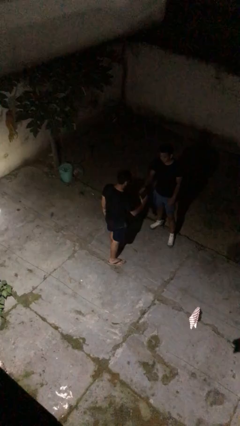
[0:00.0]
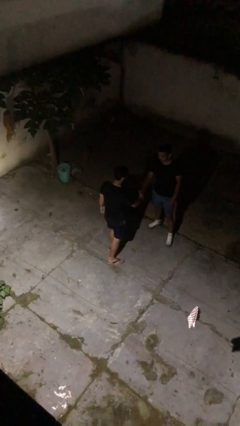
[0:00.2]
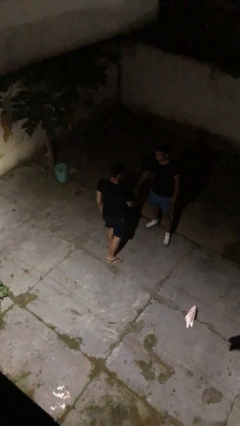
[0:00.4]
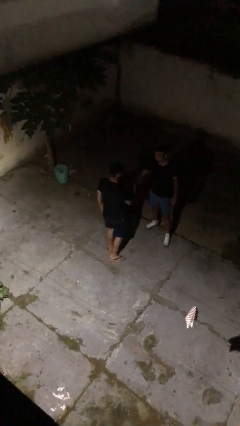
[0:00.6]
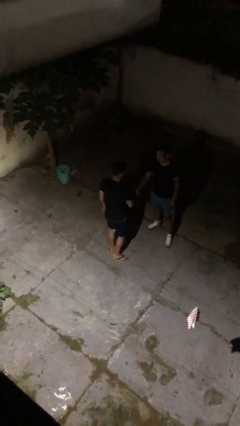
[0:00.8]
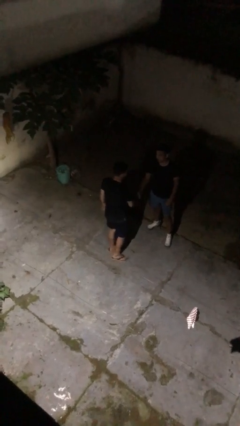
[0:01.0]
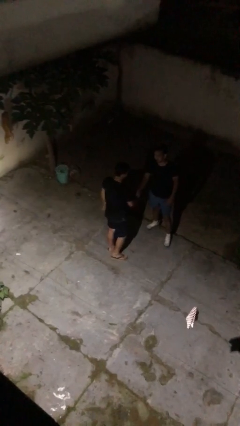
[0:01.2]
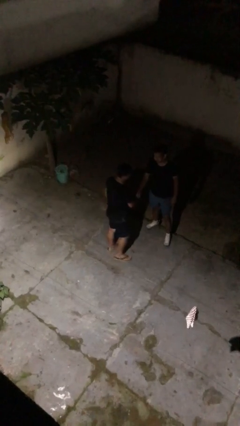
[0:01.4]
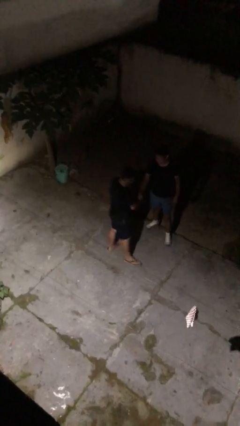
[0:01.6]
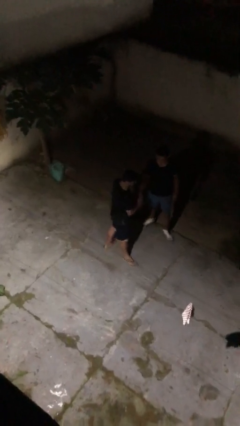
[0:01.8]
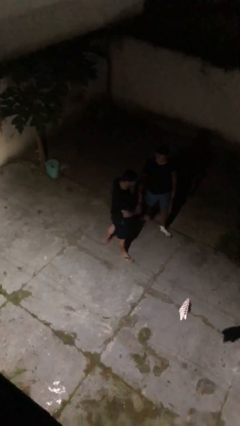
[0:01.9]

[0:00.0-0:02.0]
person shakes hand

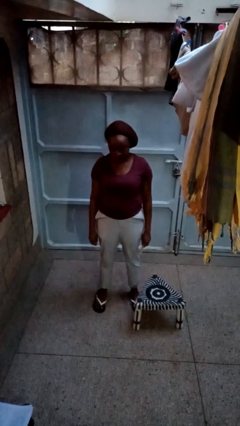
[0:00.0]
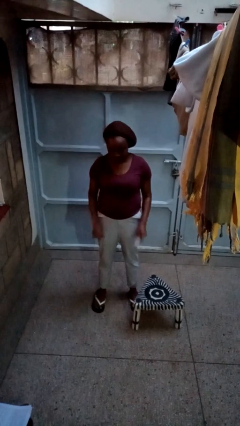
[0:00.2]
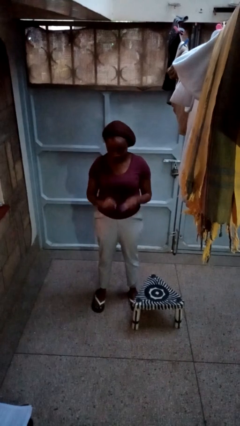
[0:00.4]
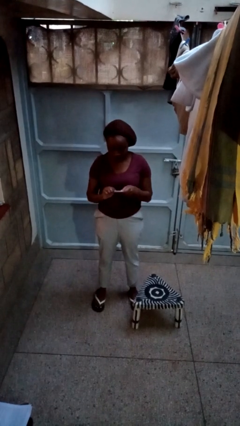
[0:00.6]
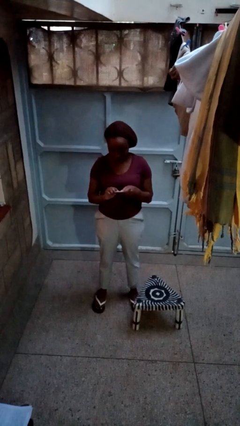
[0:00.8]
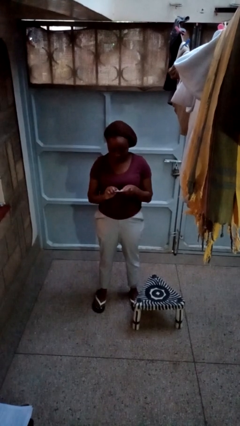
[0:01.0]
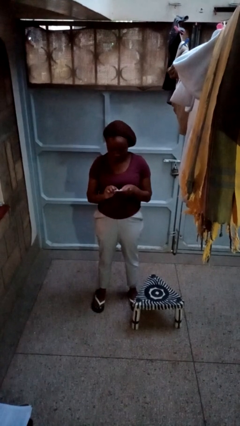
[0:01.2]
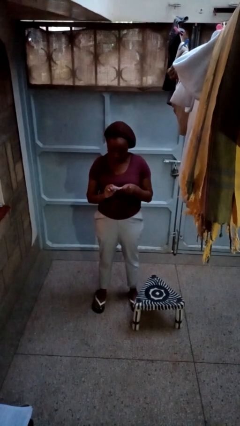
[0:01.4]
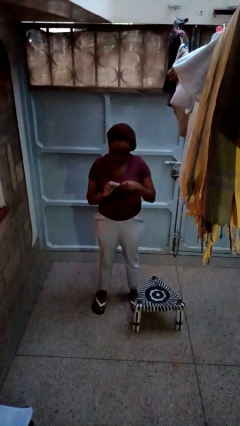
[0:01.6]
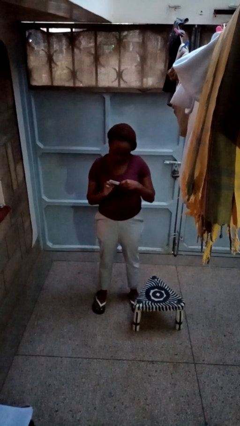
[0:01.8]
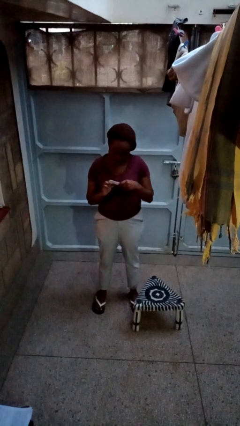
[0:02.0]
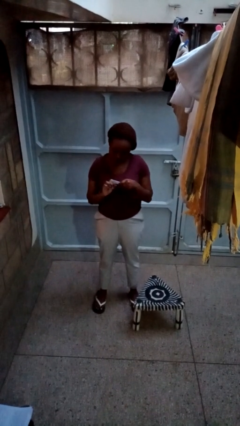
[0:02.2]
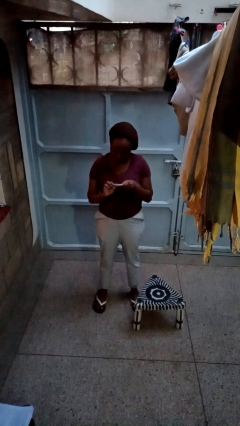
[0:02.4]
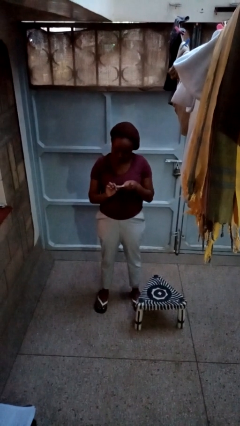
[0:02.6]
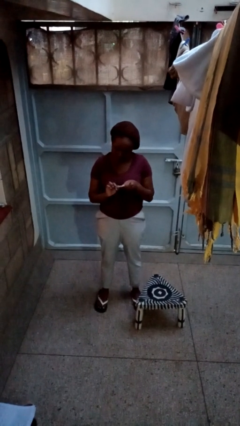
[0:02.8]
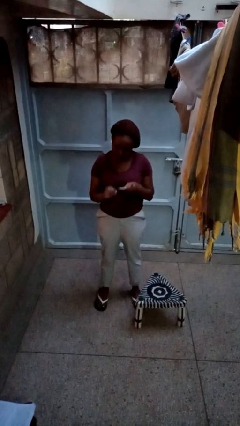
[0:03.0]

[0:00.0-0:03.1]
person files fingernails

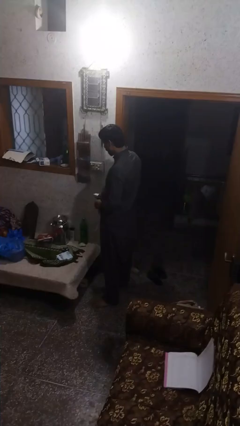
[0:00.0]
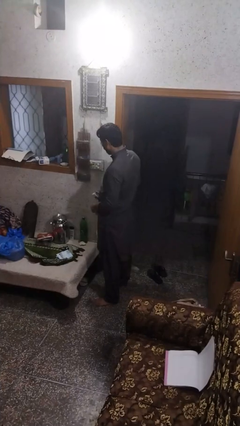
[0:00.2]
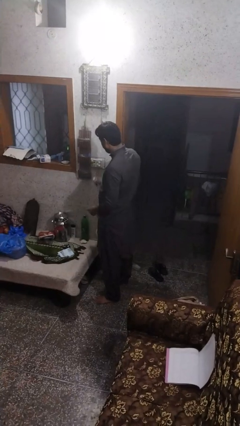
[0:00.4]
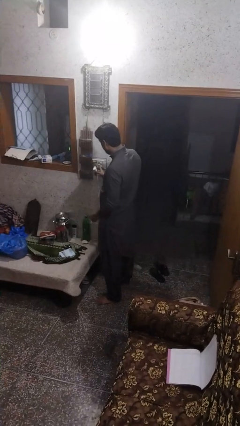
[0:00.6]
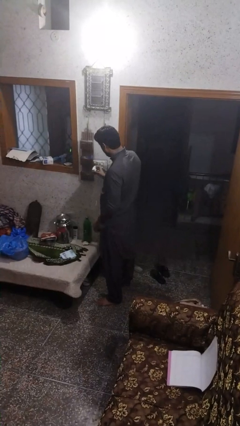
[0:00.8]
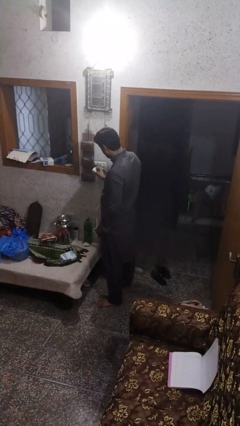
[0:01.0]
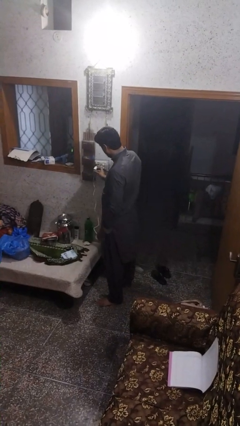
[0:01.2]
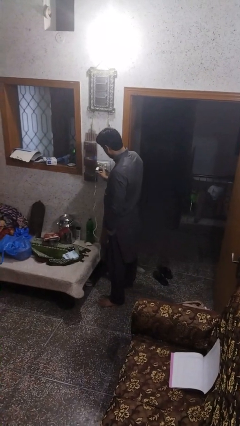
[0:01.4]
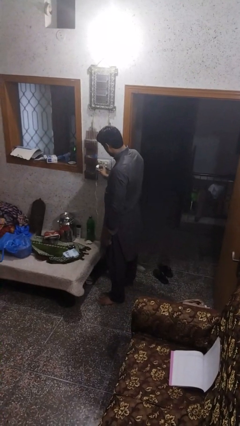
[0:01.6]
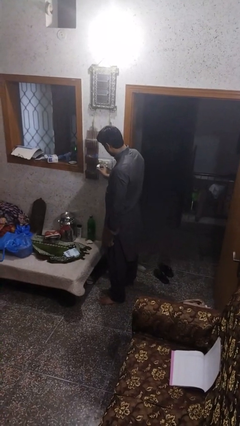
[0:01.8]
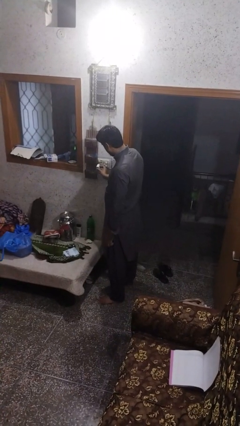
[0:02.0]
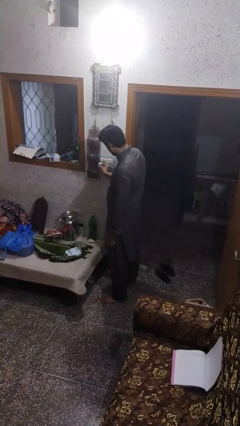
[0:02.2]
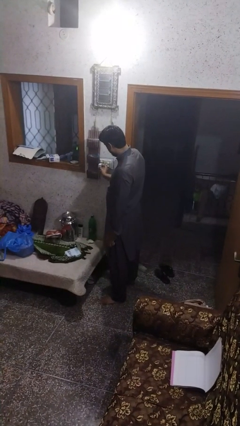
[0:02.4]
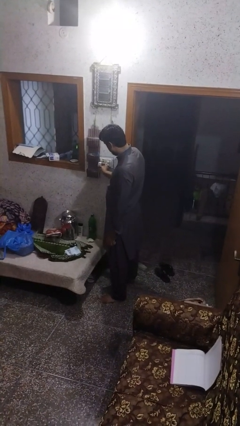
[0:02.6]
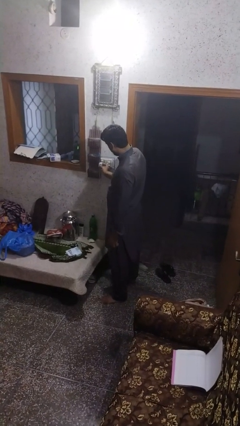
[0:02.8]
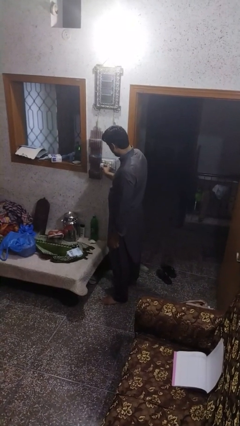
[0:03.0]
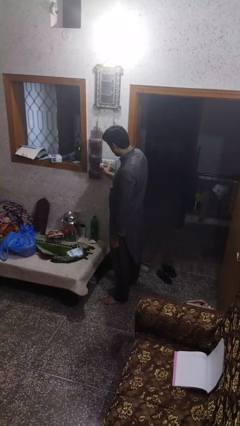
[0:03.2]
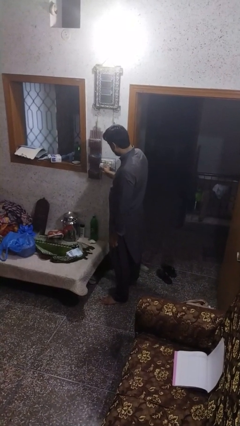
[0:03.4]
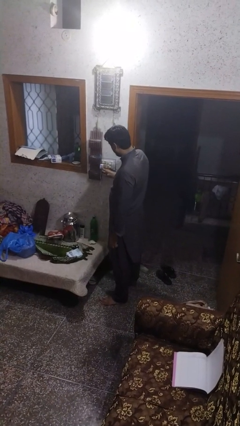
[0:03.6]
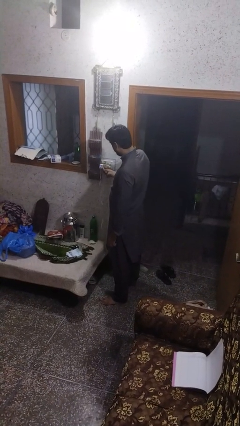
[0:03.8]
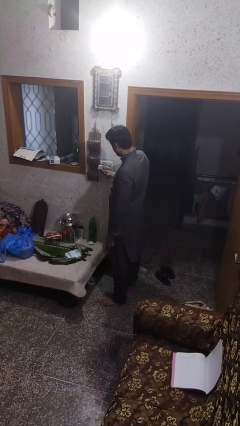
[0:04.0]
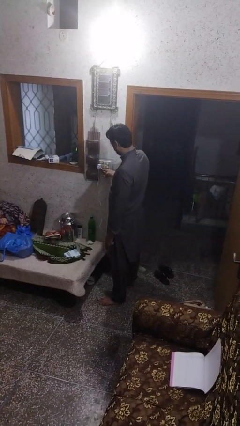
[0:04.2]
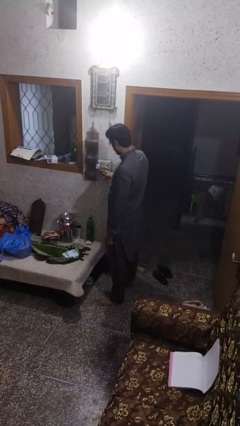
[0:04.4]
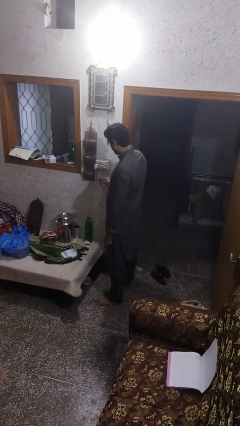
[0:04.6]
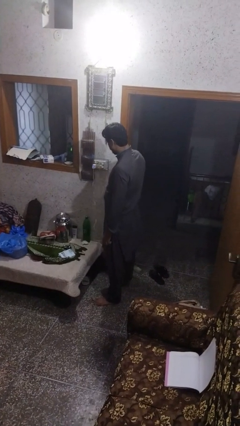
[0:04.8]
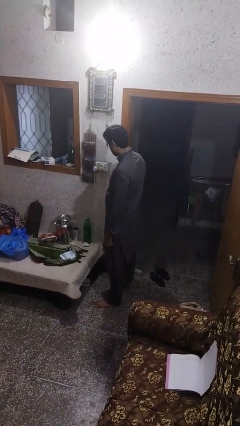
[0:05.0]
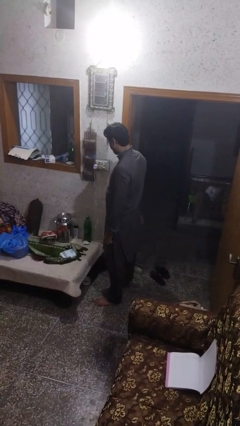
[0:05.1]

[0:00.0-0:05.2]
person plugs into electrical socket

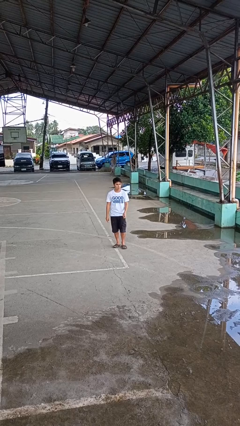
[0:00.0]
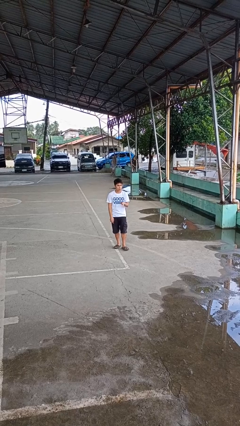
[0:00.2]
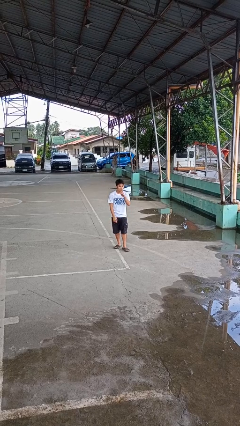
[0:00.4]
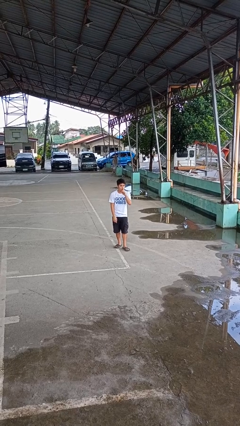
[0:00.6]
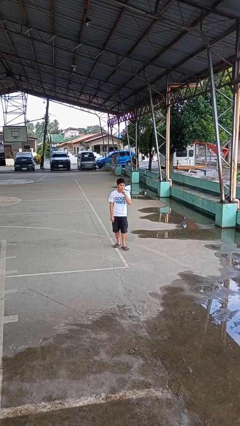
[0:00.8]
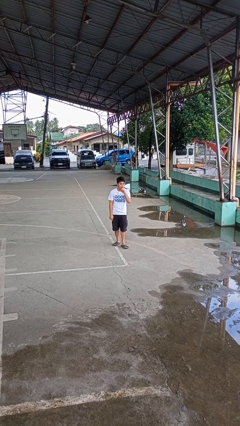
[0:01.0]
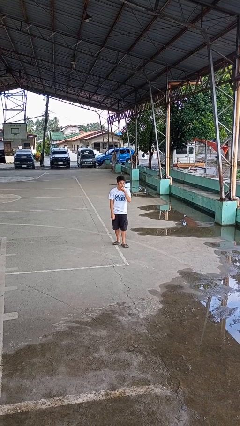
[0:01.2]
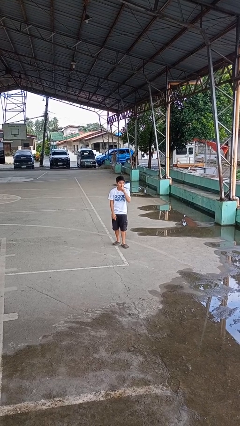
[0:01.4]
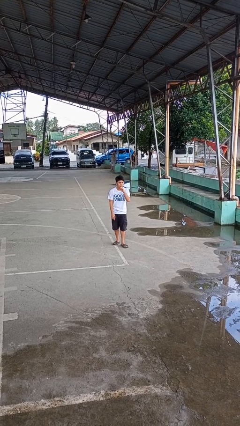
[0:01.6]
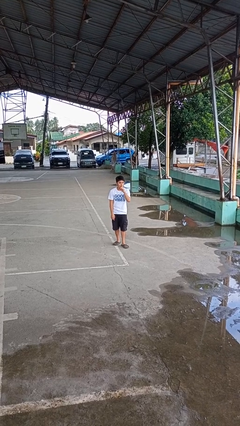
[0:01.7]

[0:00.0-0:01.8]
person gestures be quiet

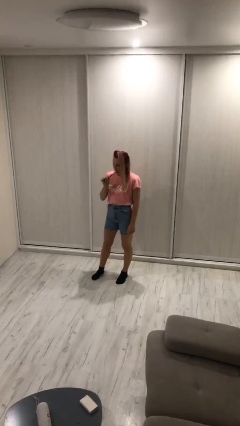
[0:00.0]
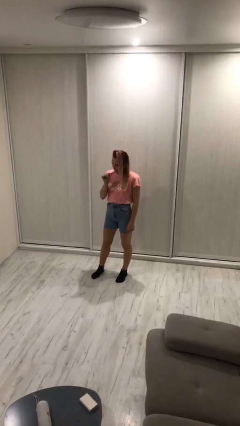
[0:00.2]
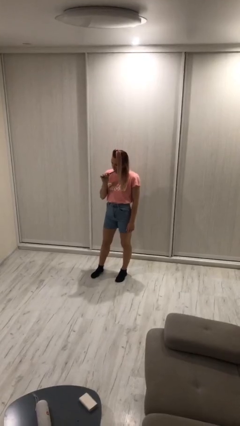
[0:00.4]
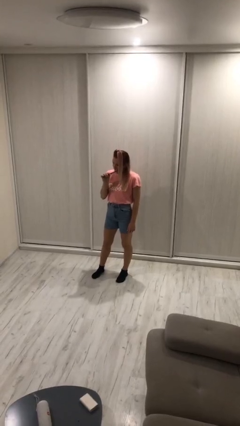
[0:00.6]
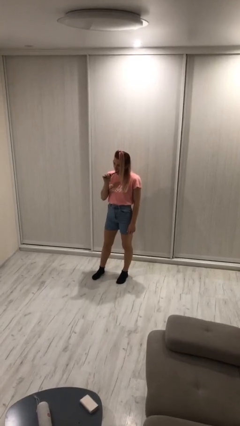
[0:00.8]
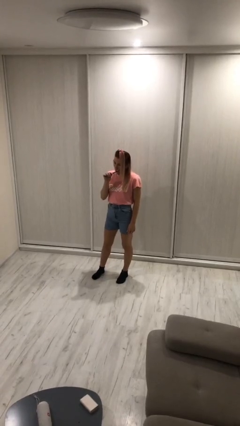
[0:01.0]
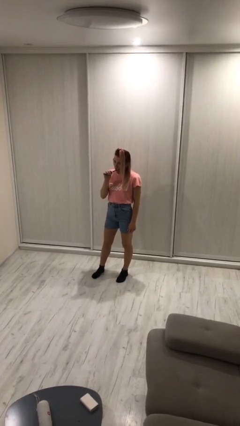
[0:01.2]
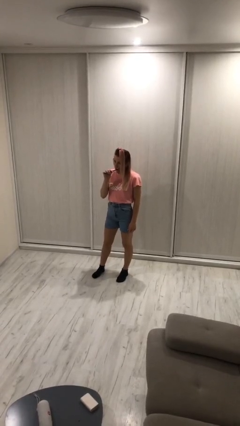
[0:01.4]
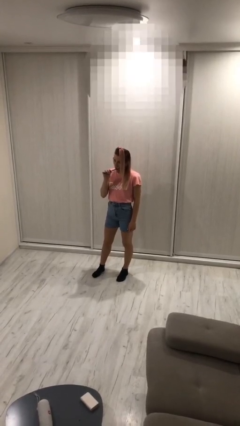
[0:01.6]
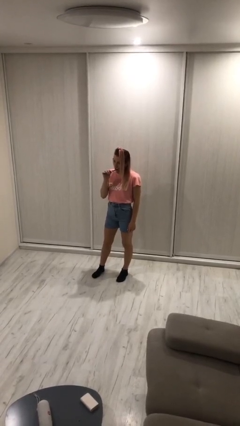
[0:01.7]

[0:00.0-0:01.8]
person brushes teeth

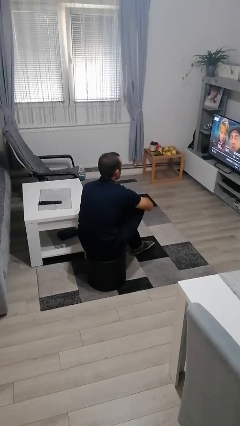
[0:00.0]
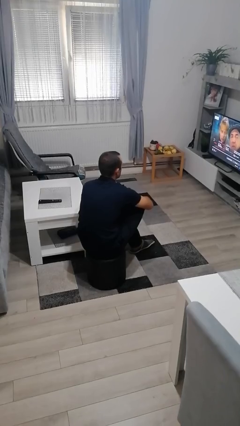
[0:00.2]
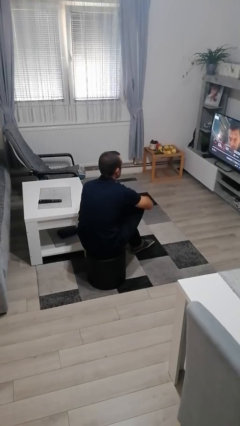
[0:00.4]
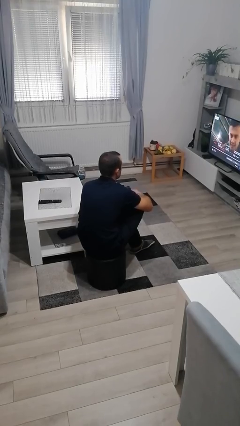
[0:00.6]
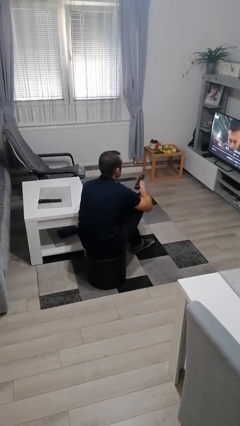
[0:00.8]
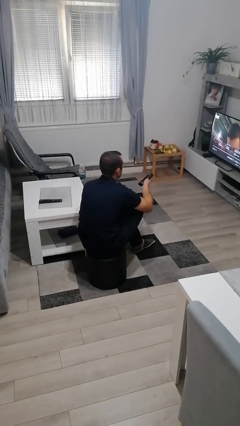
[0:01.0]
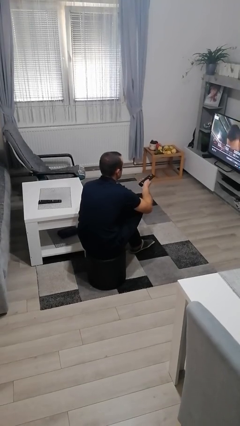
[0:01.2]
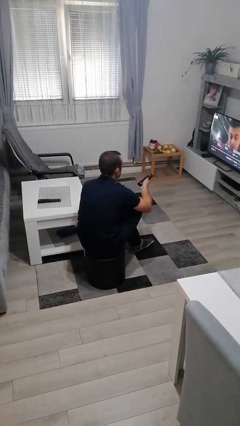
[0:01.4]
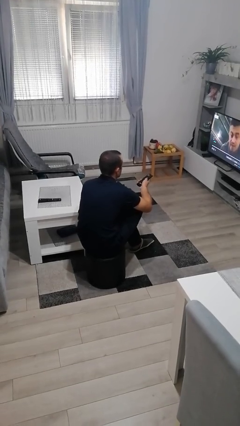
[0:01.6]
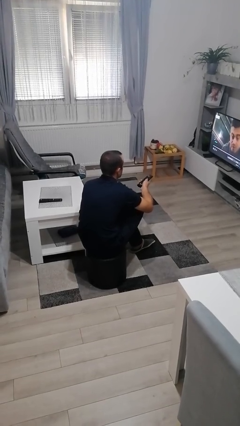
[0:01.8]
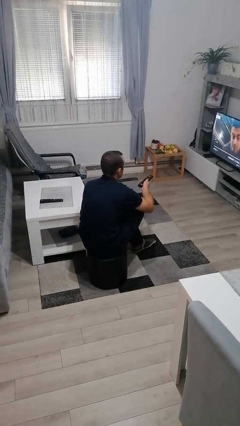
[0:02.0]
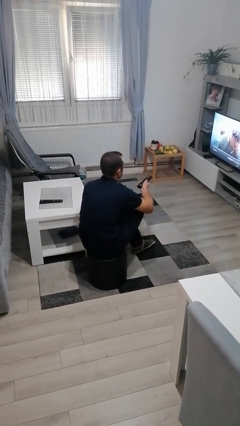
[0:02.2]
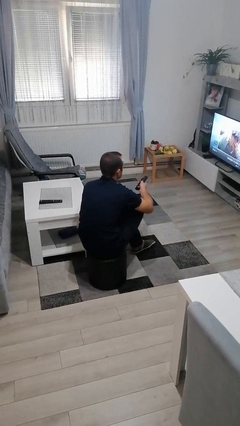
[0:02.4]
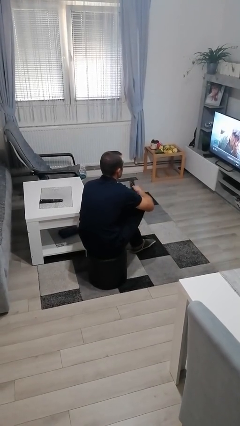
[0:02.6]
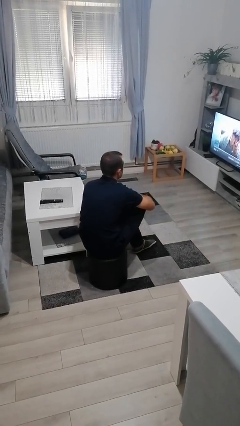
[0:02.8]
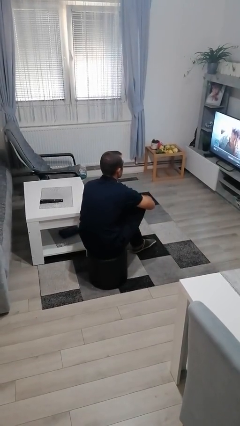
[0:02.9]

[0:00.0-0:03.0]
person uses television remote

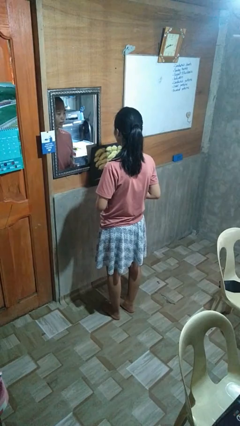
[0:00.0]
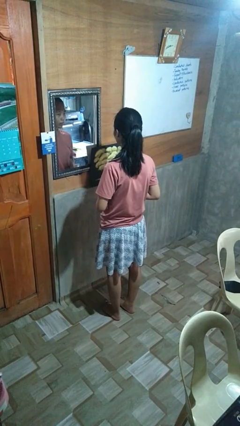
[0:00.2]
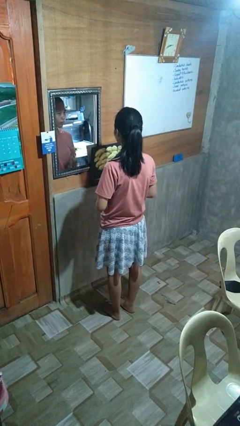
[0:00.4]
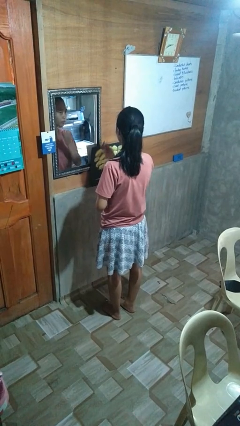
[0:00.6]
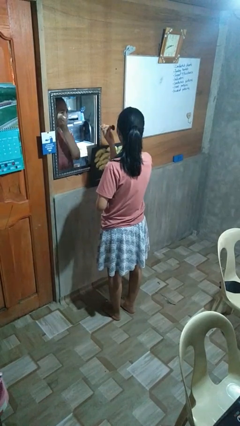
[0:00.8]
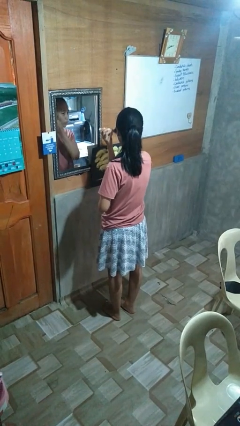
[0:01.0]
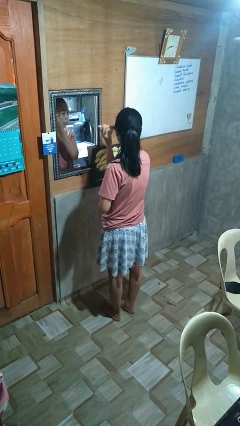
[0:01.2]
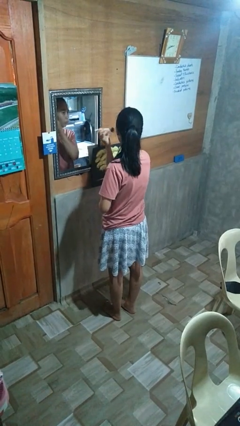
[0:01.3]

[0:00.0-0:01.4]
person applies foundation makeup
